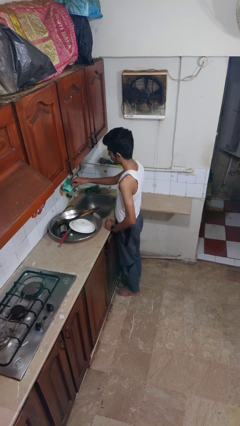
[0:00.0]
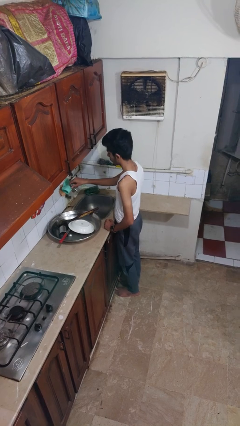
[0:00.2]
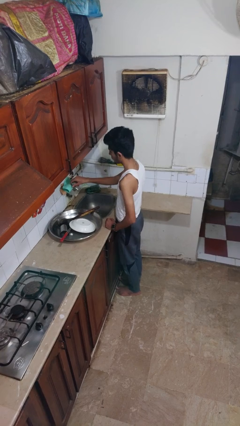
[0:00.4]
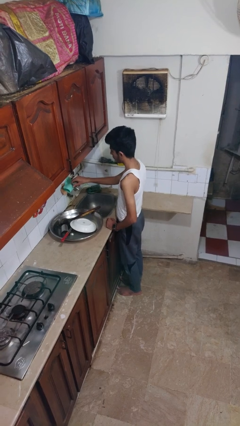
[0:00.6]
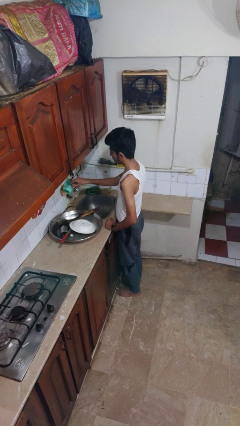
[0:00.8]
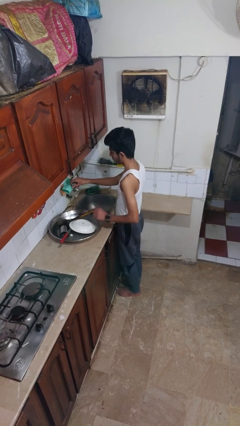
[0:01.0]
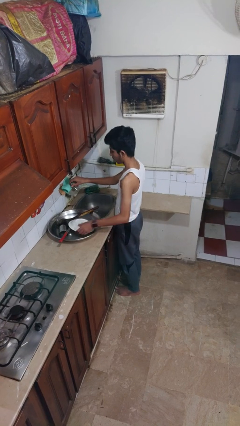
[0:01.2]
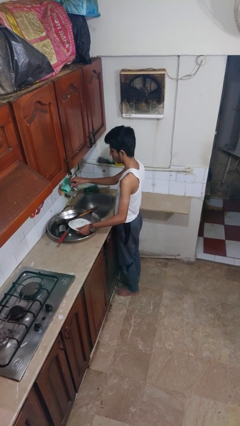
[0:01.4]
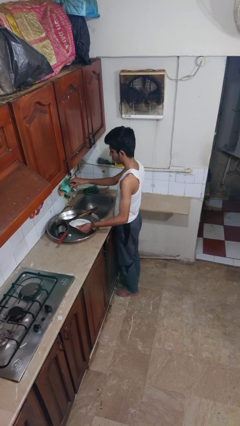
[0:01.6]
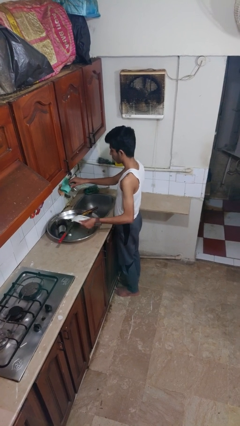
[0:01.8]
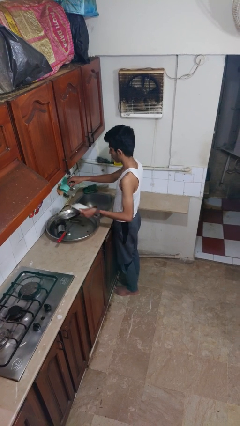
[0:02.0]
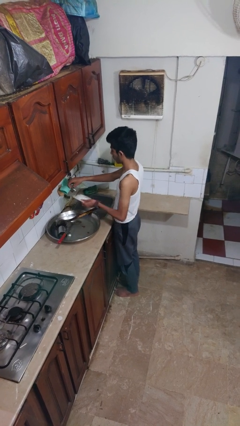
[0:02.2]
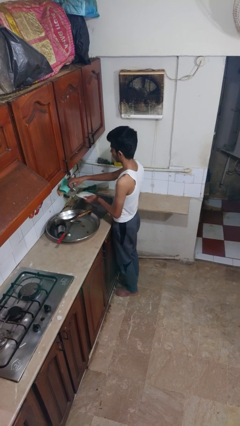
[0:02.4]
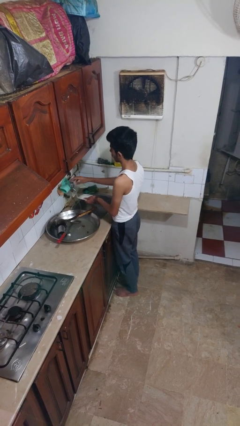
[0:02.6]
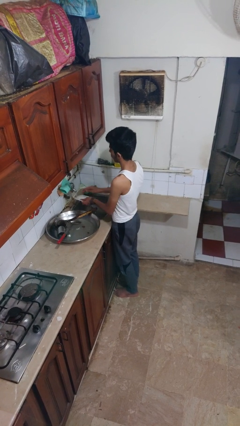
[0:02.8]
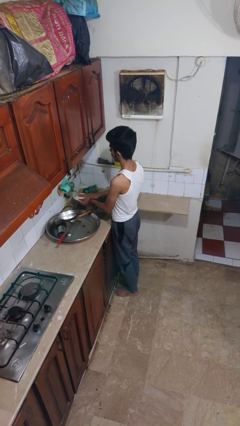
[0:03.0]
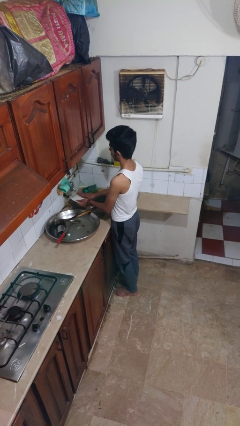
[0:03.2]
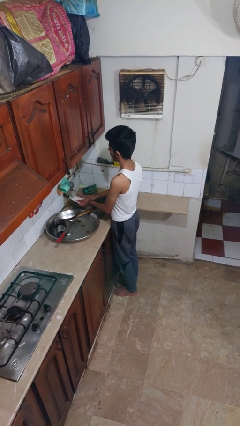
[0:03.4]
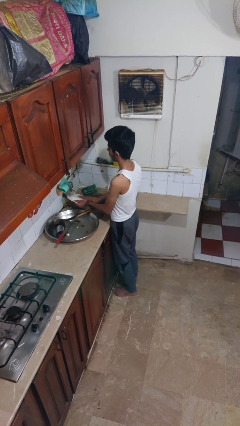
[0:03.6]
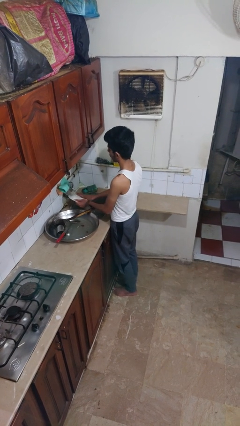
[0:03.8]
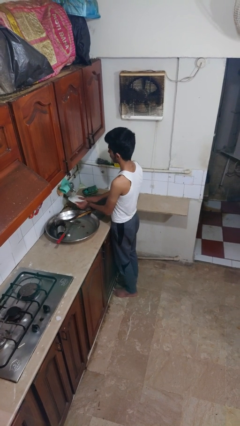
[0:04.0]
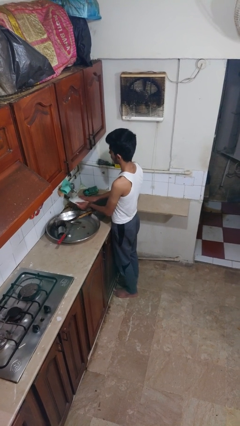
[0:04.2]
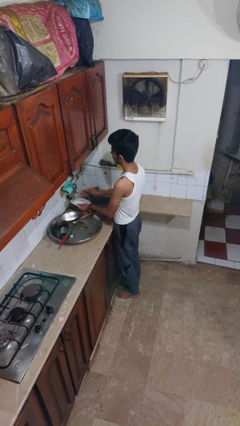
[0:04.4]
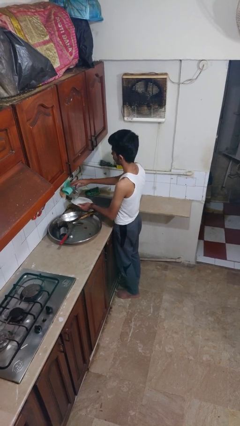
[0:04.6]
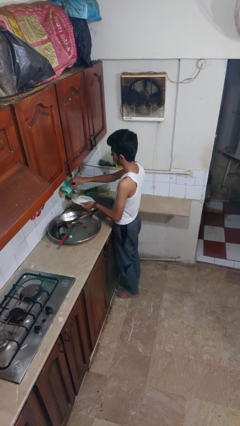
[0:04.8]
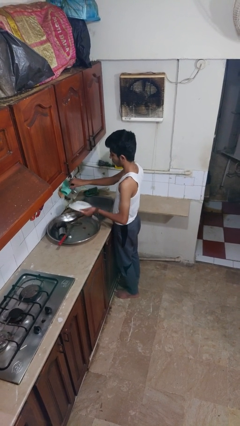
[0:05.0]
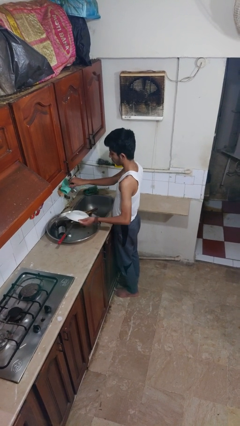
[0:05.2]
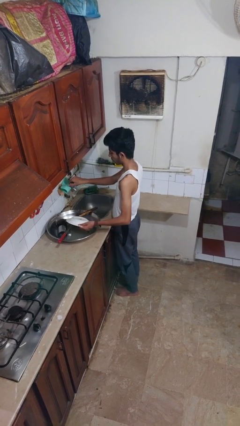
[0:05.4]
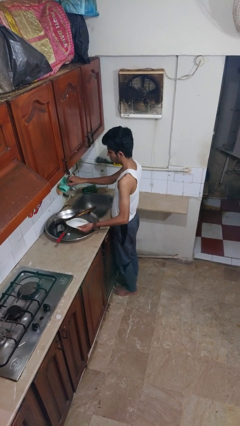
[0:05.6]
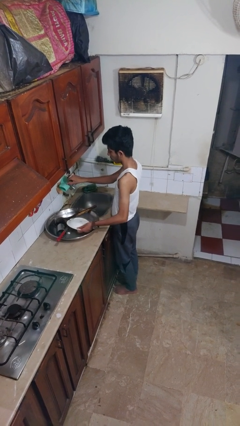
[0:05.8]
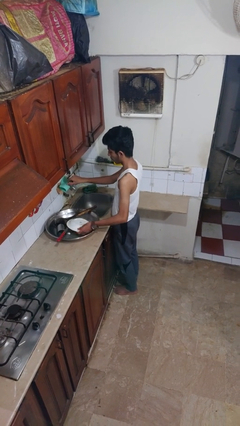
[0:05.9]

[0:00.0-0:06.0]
person washes dish

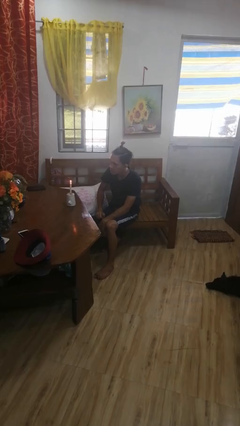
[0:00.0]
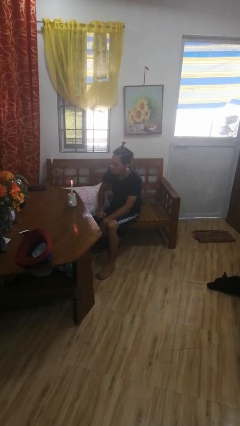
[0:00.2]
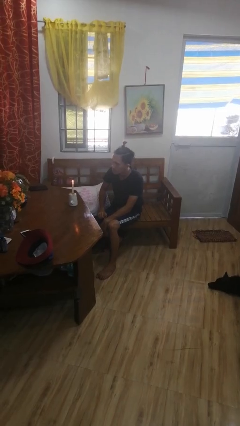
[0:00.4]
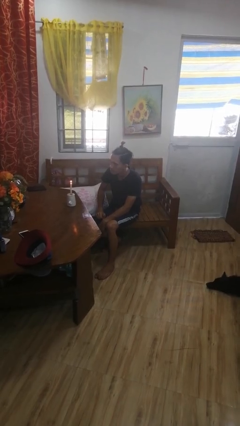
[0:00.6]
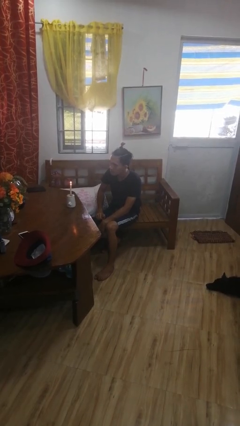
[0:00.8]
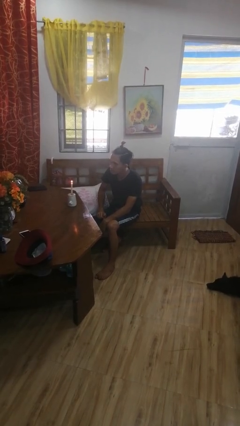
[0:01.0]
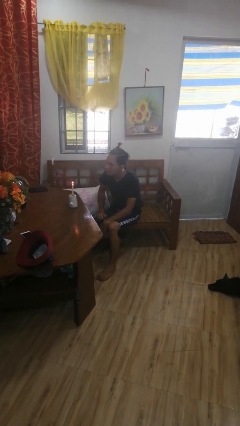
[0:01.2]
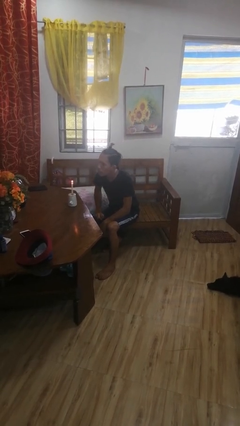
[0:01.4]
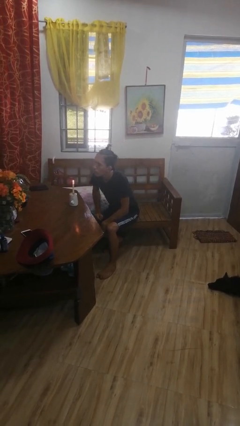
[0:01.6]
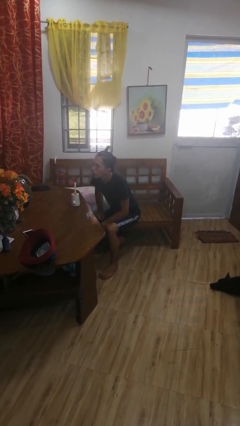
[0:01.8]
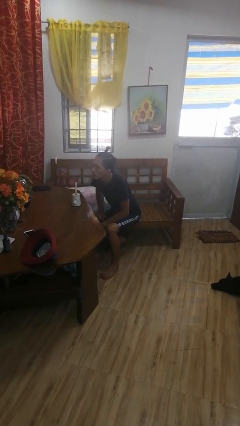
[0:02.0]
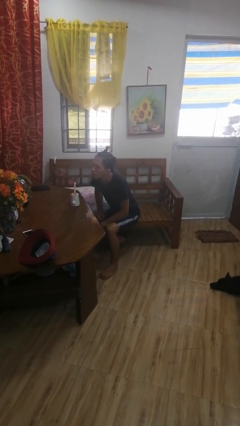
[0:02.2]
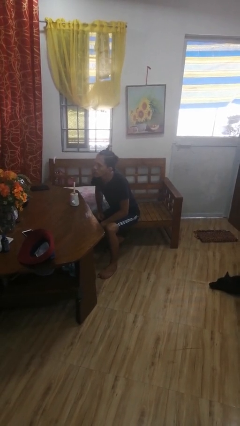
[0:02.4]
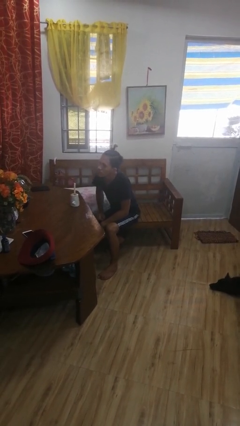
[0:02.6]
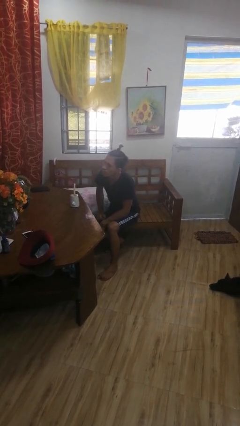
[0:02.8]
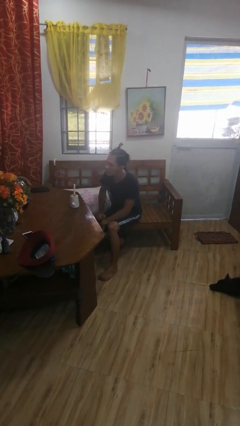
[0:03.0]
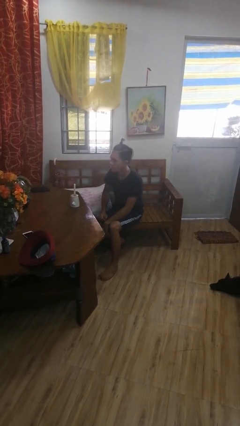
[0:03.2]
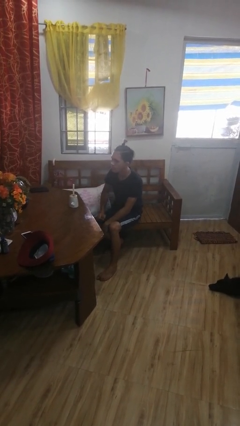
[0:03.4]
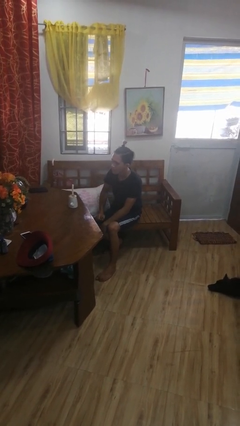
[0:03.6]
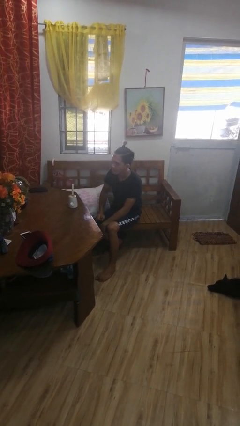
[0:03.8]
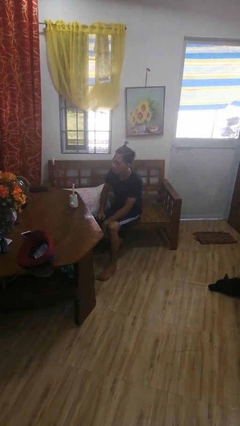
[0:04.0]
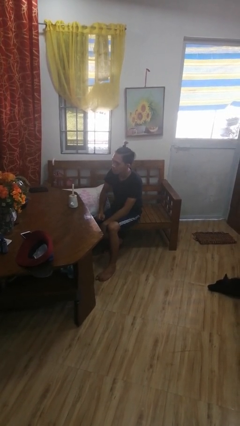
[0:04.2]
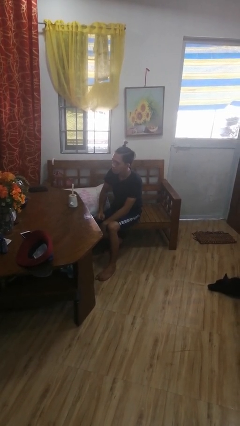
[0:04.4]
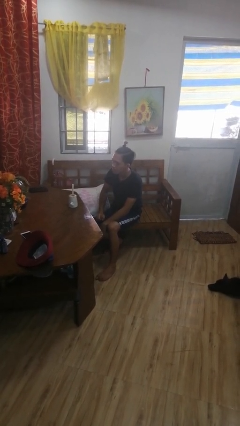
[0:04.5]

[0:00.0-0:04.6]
person extinguishes candle

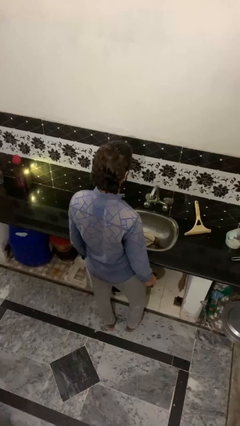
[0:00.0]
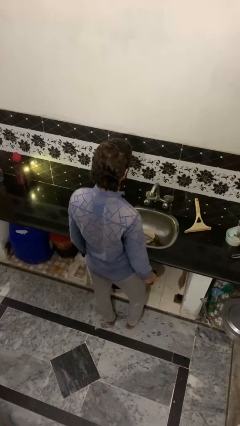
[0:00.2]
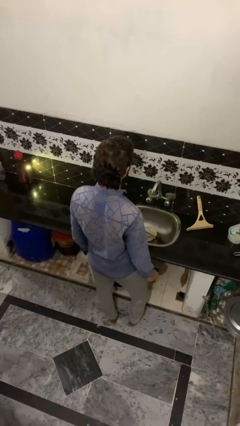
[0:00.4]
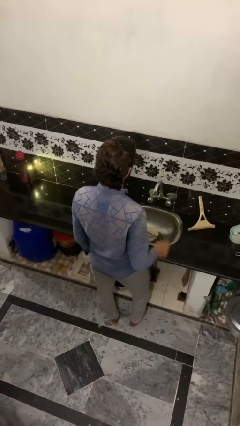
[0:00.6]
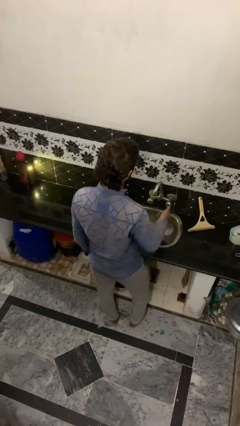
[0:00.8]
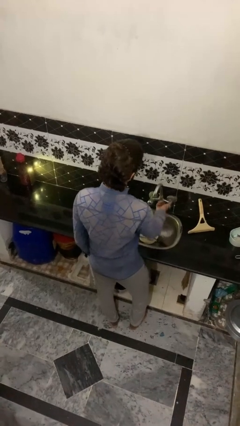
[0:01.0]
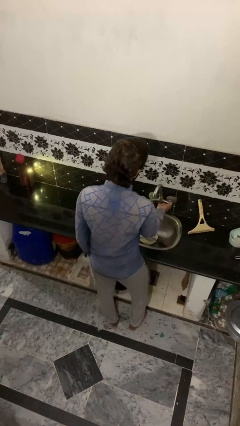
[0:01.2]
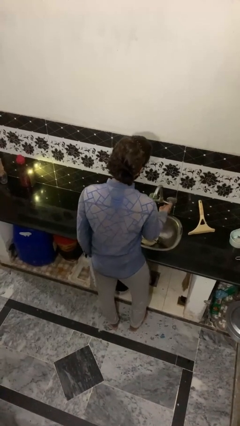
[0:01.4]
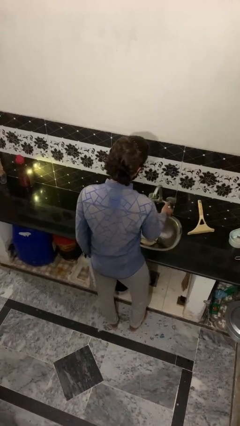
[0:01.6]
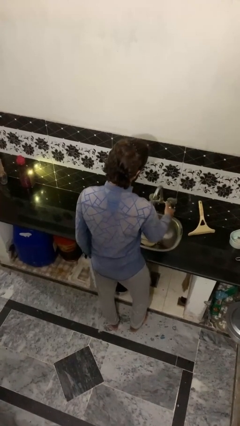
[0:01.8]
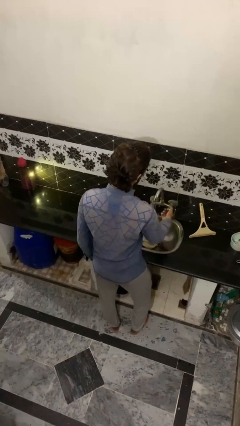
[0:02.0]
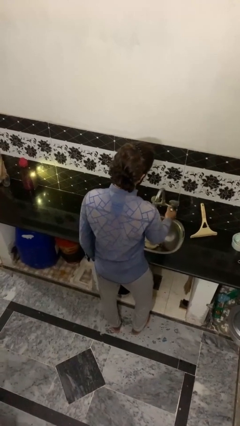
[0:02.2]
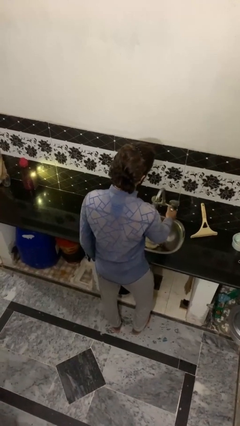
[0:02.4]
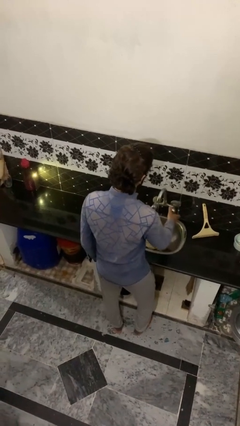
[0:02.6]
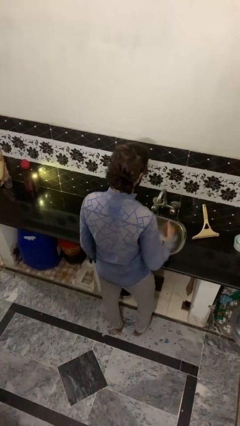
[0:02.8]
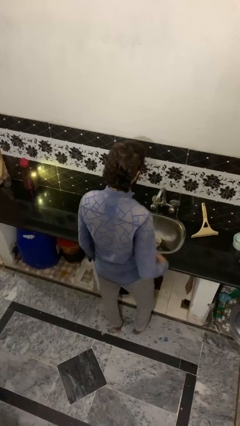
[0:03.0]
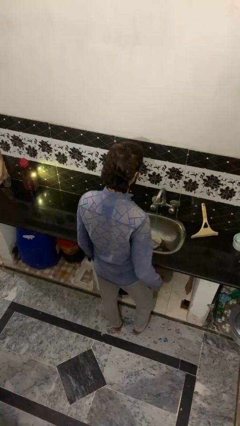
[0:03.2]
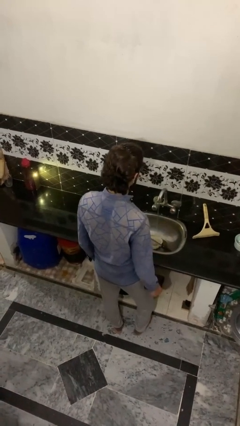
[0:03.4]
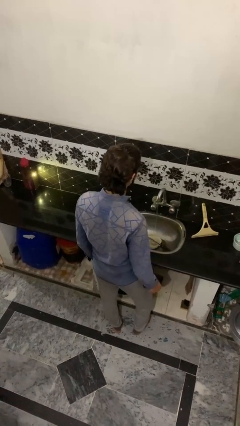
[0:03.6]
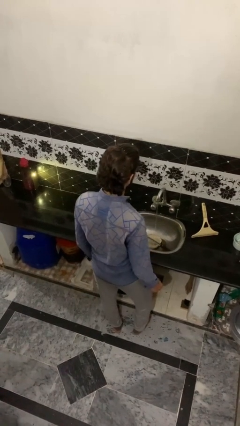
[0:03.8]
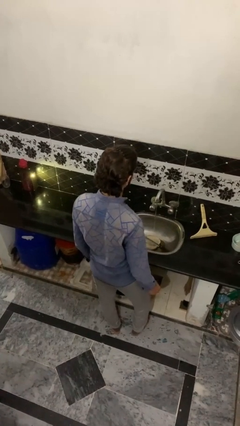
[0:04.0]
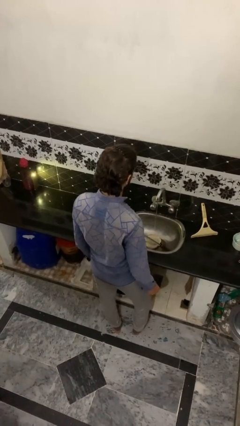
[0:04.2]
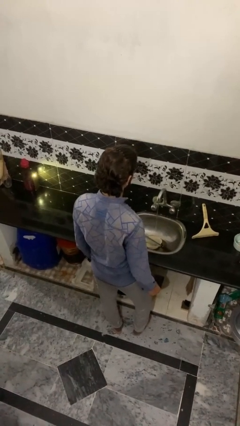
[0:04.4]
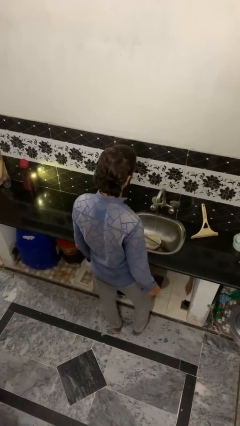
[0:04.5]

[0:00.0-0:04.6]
person turns on faucet

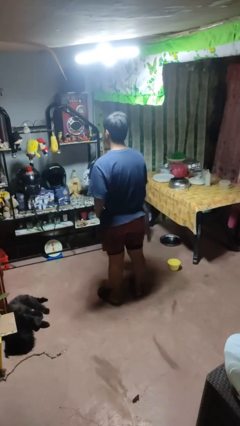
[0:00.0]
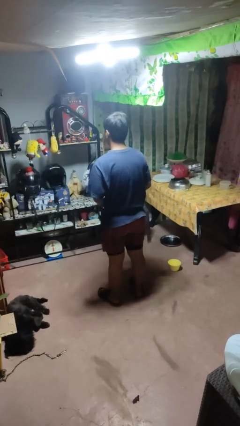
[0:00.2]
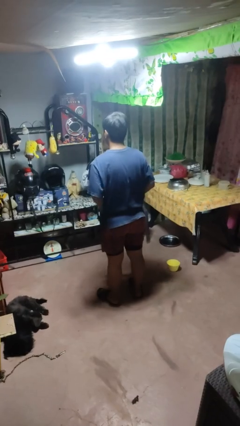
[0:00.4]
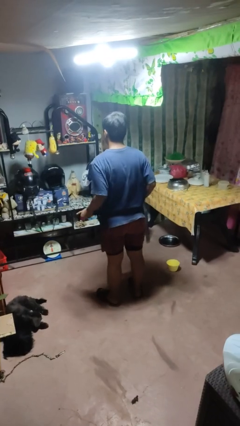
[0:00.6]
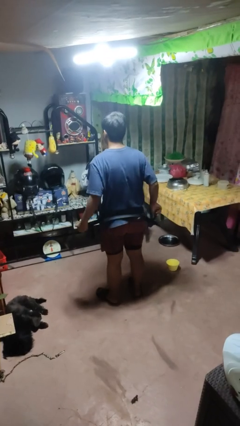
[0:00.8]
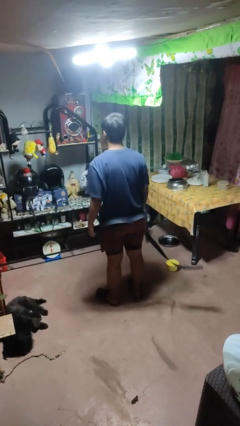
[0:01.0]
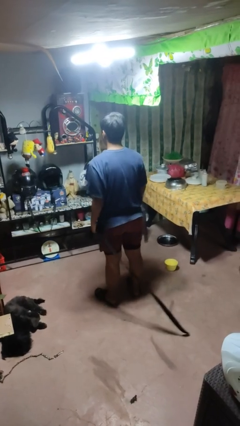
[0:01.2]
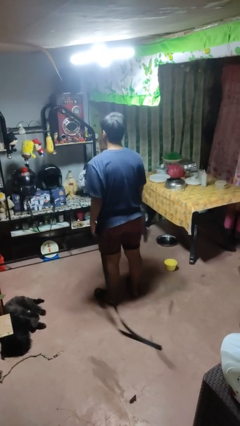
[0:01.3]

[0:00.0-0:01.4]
person takes off belt

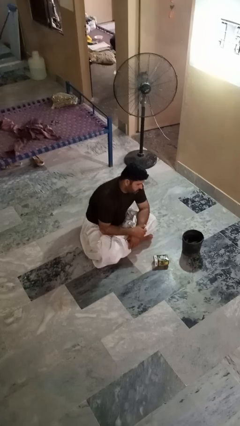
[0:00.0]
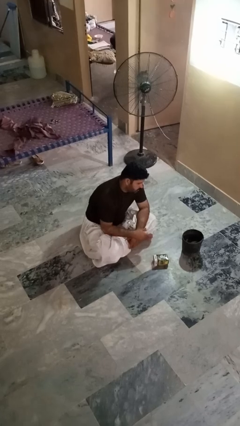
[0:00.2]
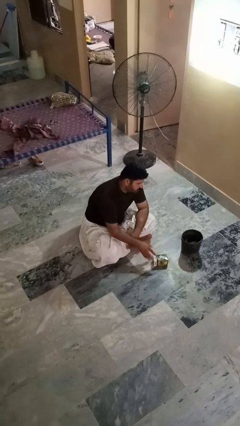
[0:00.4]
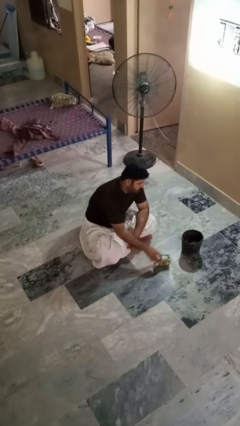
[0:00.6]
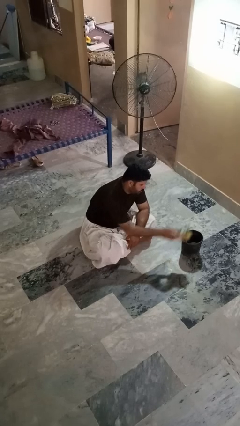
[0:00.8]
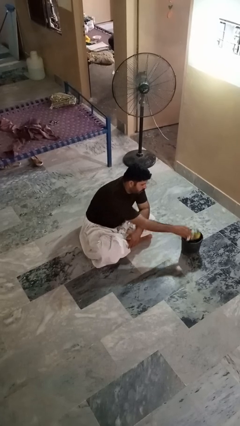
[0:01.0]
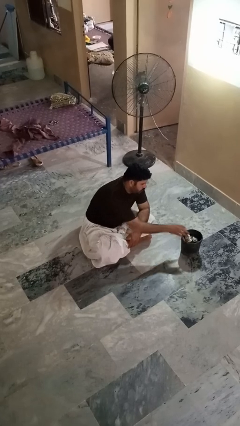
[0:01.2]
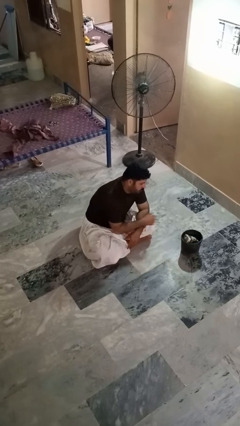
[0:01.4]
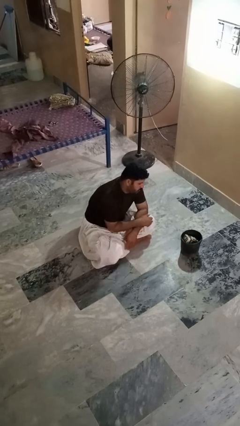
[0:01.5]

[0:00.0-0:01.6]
person puts object into basket
